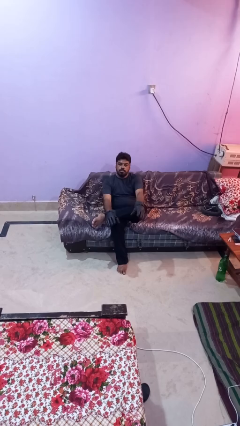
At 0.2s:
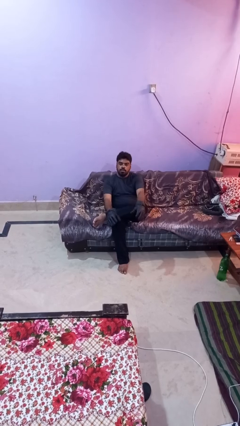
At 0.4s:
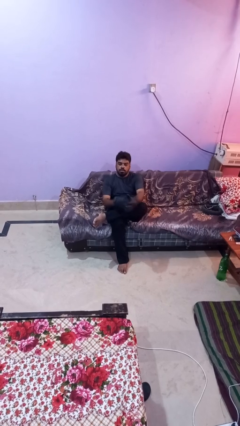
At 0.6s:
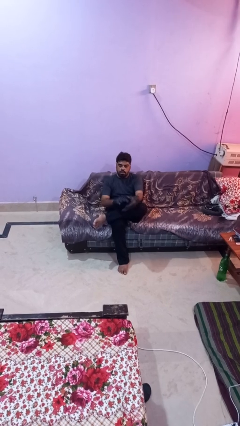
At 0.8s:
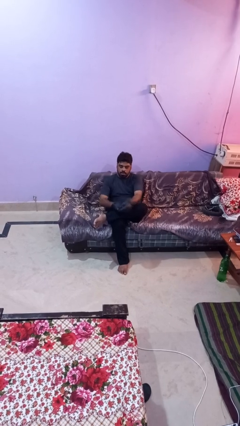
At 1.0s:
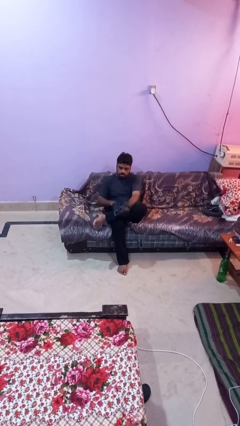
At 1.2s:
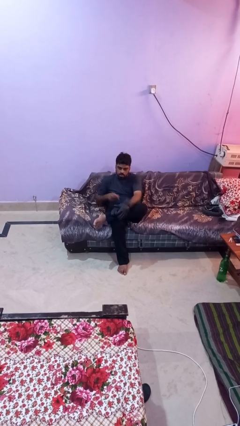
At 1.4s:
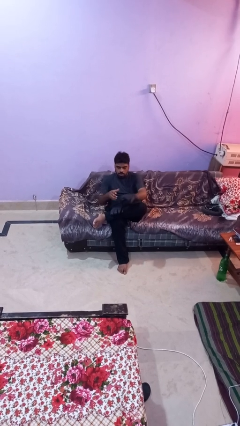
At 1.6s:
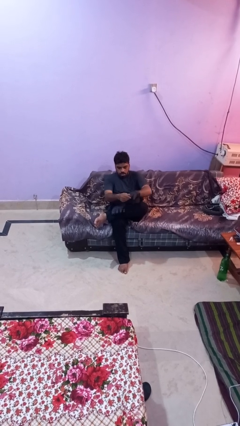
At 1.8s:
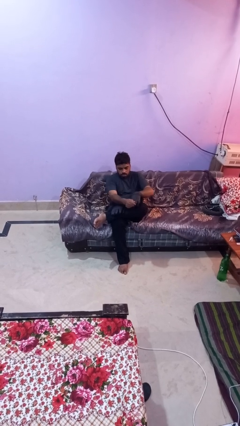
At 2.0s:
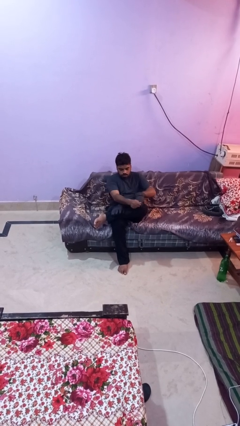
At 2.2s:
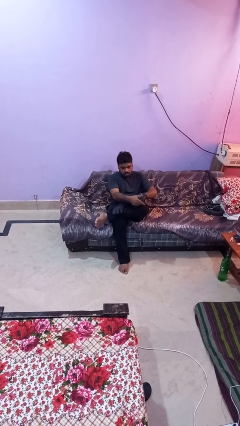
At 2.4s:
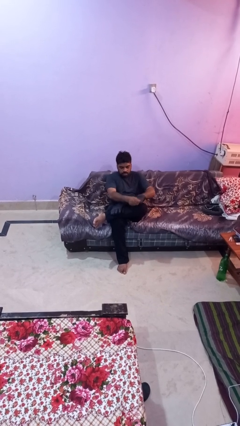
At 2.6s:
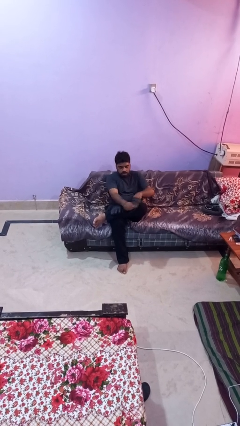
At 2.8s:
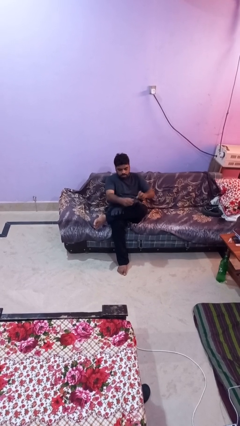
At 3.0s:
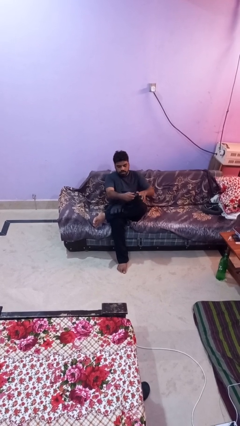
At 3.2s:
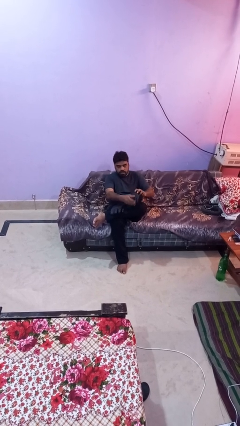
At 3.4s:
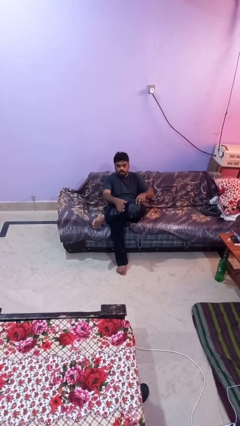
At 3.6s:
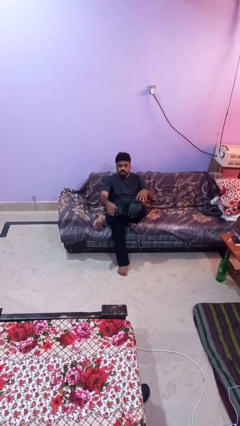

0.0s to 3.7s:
person takes off gloves

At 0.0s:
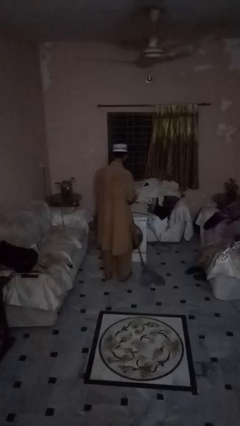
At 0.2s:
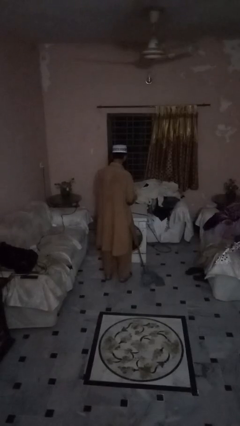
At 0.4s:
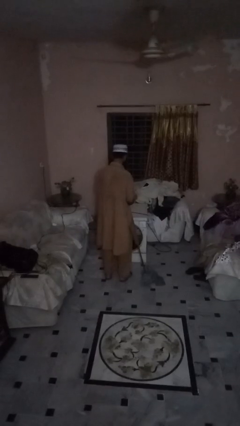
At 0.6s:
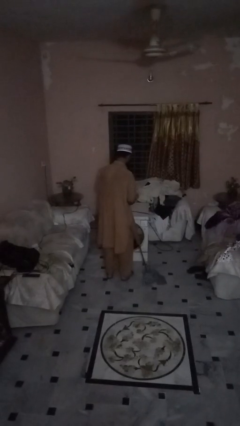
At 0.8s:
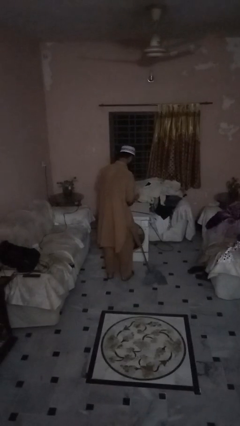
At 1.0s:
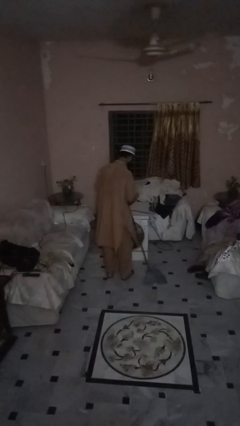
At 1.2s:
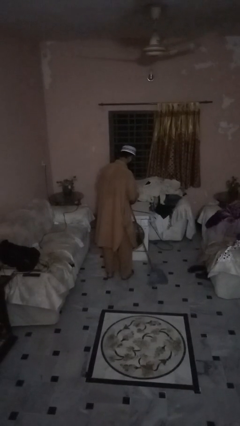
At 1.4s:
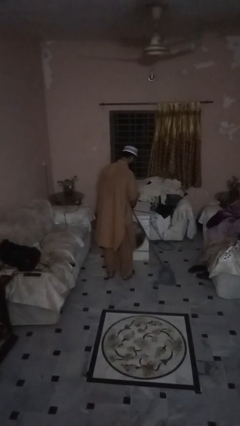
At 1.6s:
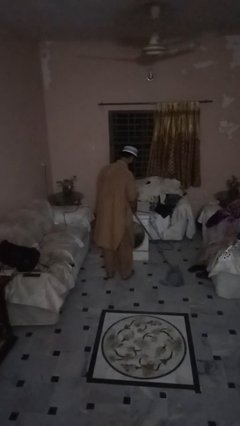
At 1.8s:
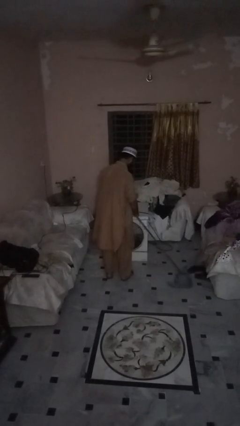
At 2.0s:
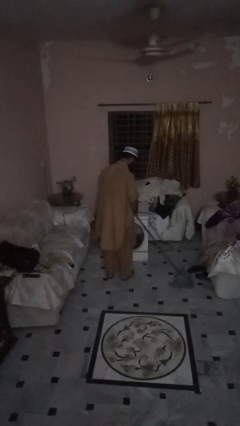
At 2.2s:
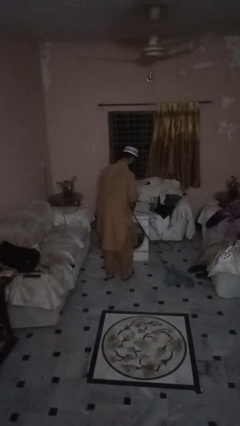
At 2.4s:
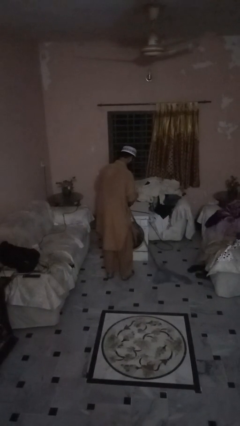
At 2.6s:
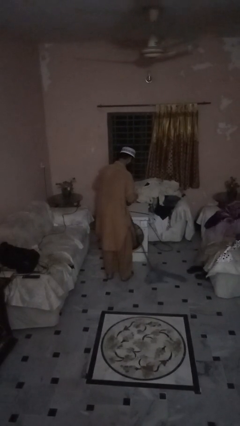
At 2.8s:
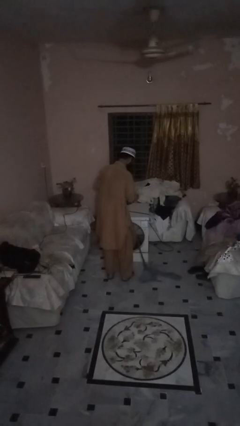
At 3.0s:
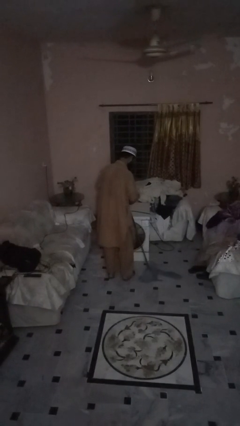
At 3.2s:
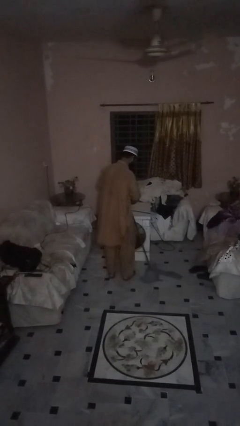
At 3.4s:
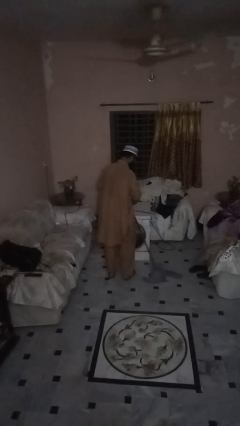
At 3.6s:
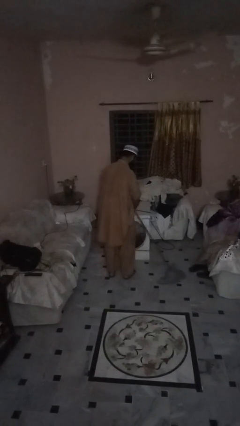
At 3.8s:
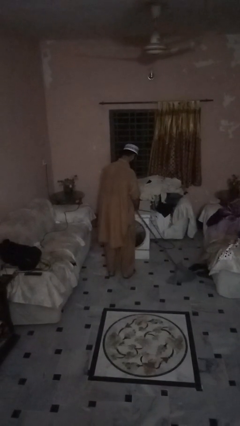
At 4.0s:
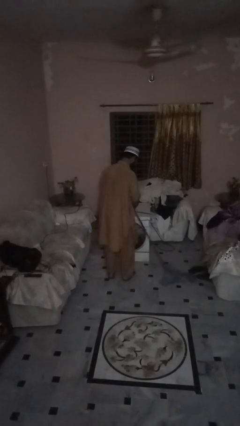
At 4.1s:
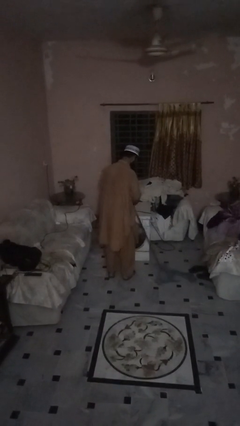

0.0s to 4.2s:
person mops

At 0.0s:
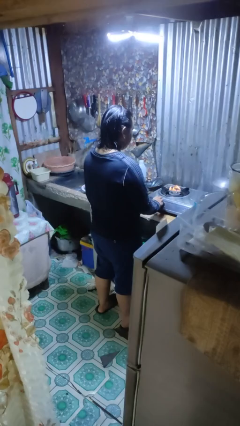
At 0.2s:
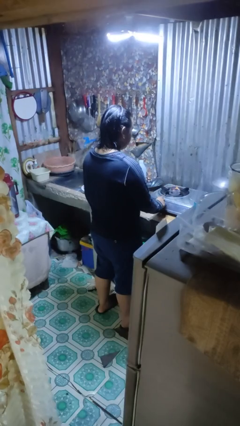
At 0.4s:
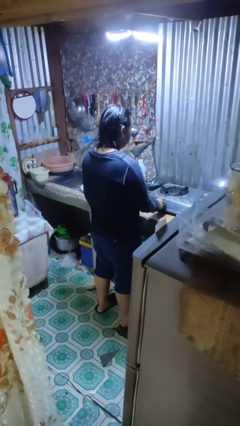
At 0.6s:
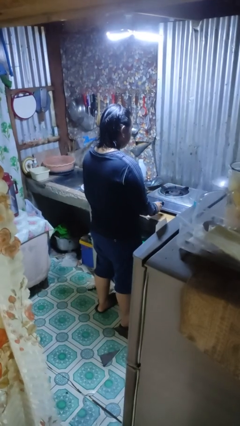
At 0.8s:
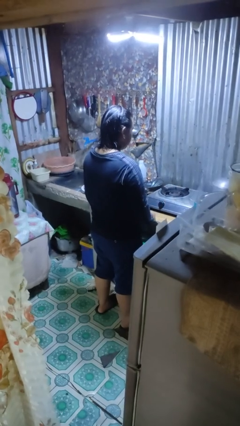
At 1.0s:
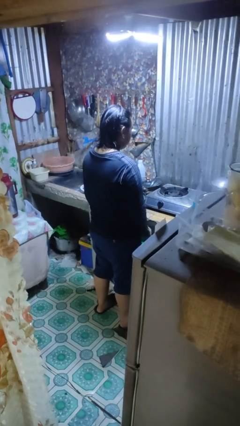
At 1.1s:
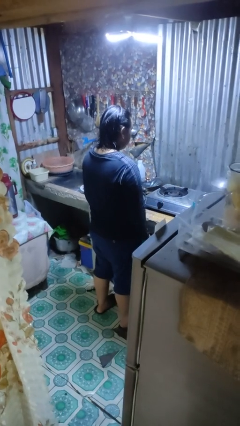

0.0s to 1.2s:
person turns off stovetop

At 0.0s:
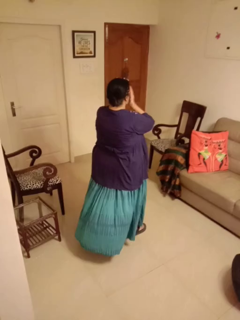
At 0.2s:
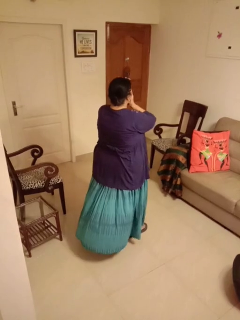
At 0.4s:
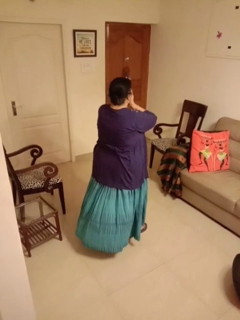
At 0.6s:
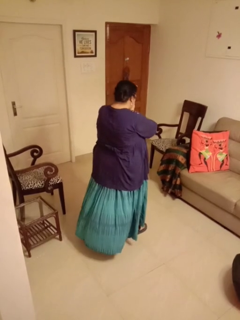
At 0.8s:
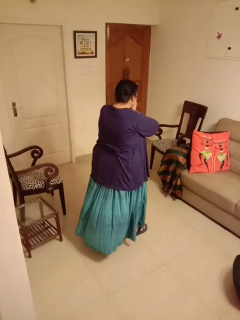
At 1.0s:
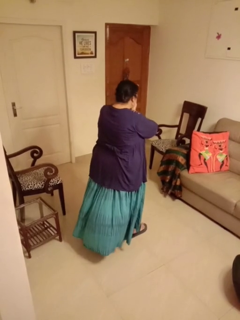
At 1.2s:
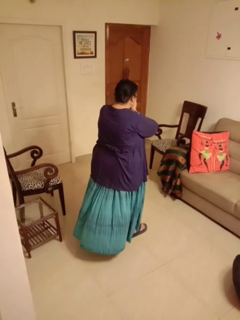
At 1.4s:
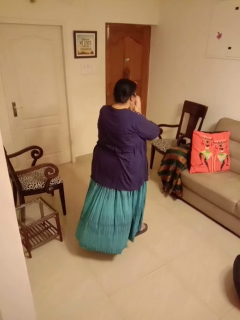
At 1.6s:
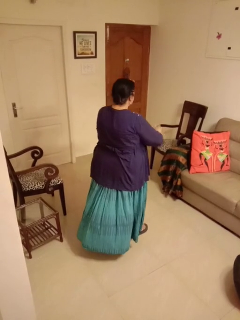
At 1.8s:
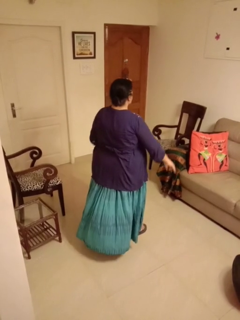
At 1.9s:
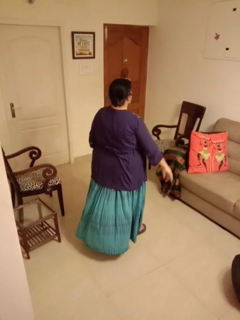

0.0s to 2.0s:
person sneezes into hand

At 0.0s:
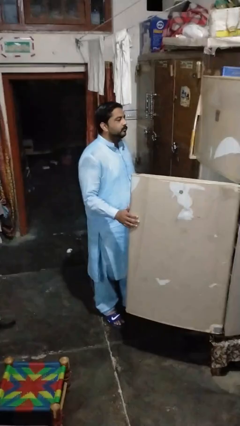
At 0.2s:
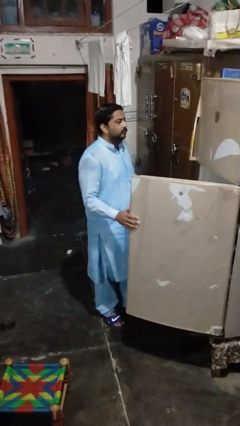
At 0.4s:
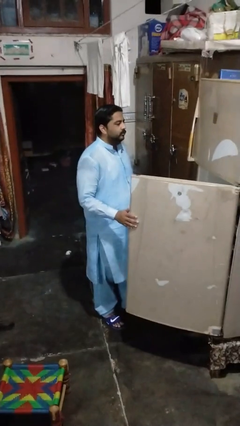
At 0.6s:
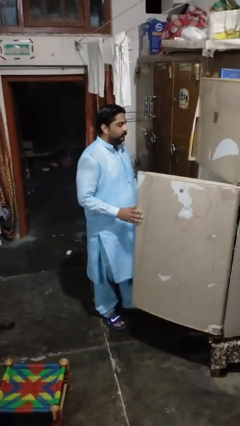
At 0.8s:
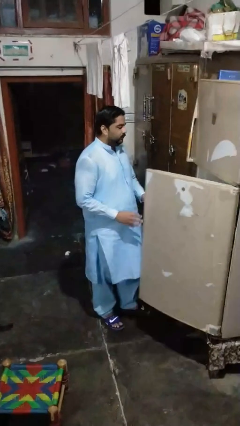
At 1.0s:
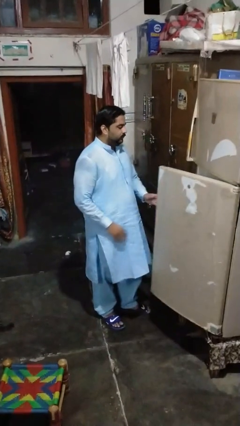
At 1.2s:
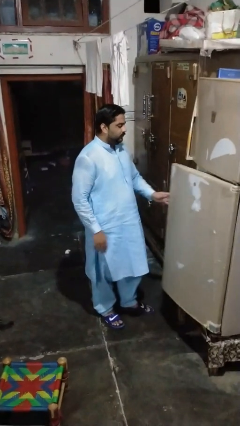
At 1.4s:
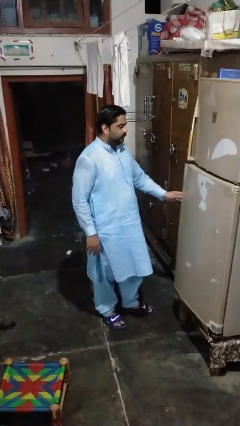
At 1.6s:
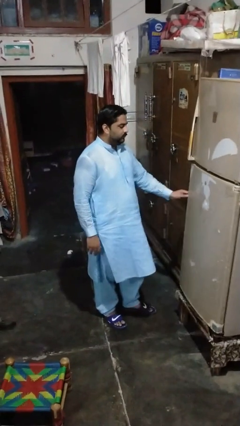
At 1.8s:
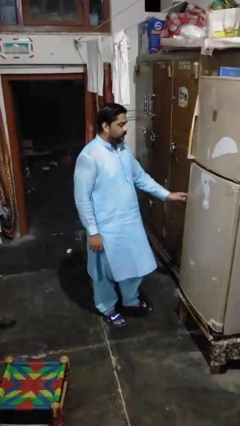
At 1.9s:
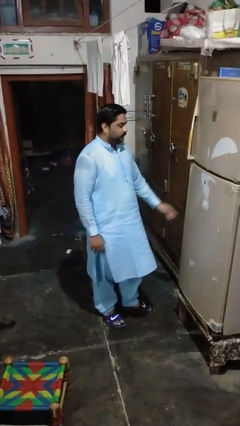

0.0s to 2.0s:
person closes refrigerator

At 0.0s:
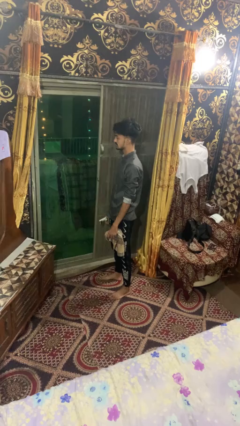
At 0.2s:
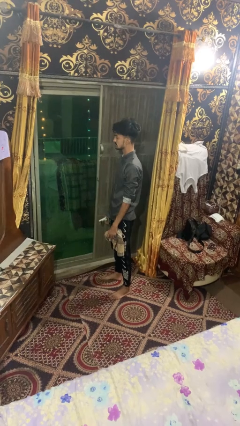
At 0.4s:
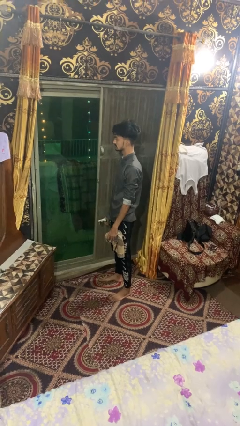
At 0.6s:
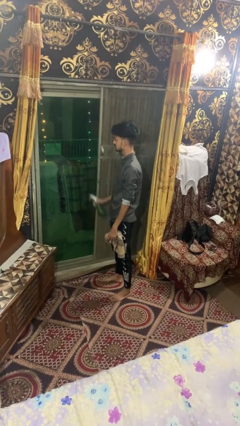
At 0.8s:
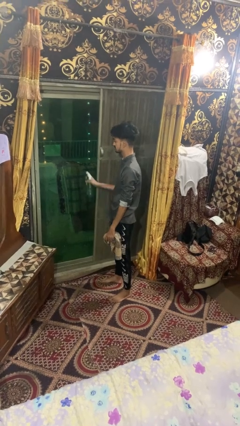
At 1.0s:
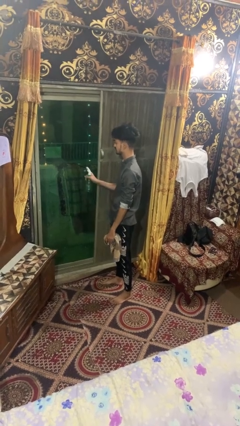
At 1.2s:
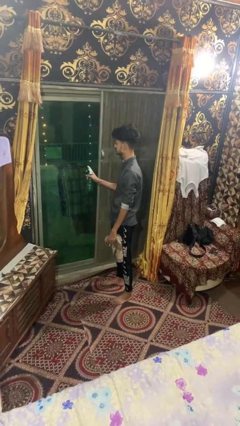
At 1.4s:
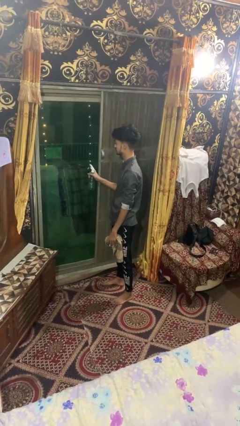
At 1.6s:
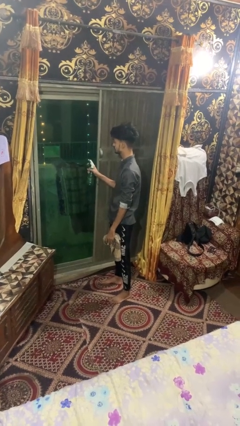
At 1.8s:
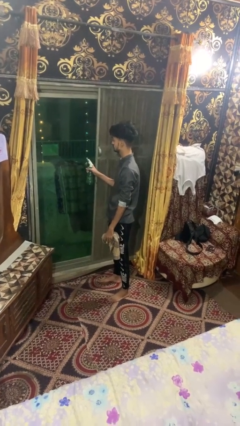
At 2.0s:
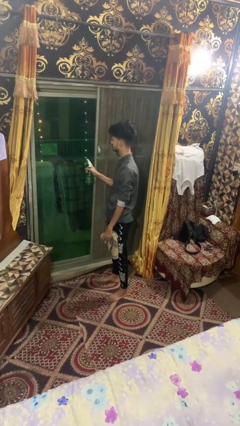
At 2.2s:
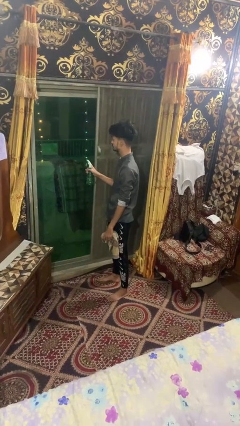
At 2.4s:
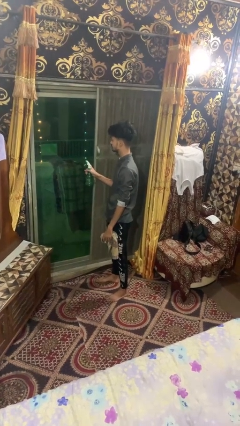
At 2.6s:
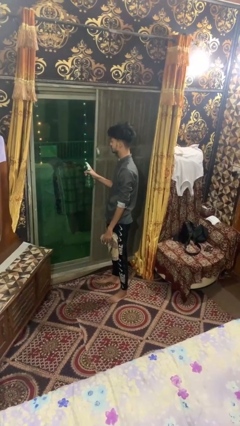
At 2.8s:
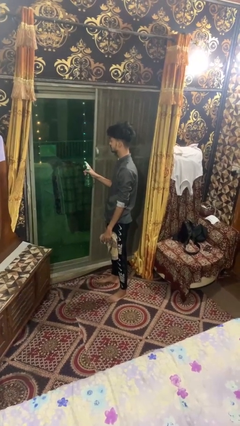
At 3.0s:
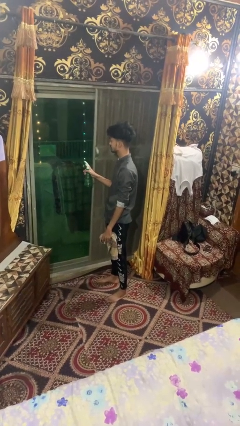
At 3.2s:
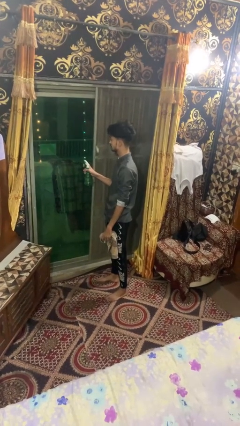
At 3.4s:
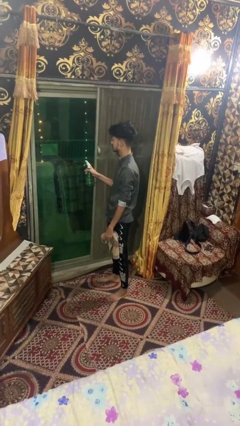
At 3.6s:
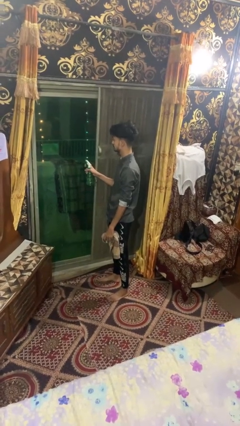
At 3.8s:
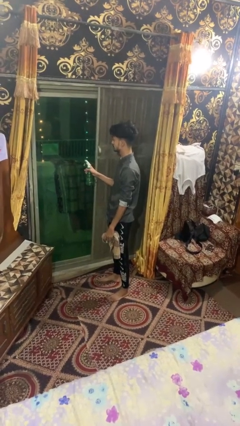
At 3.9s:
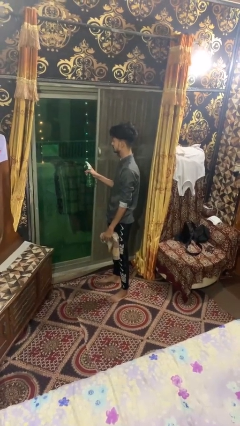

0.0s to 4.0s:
person sprays from bottle

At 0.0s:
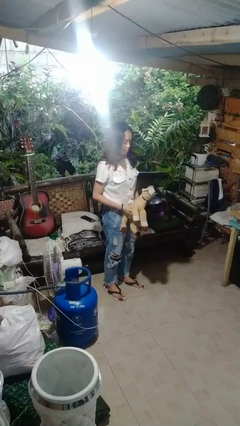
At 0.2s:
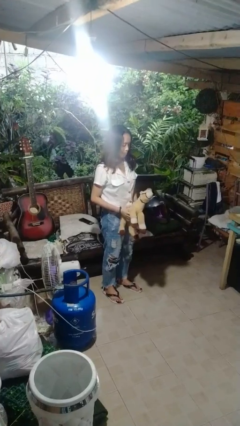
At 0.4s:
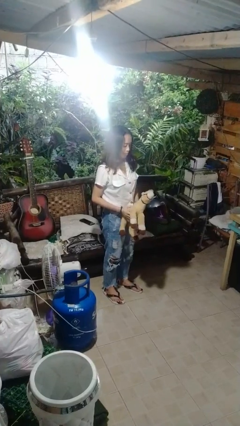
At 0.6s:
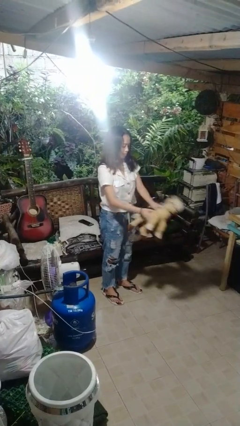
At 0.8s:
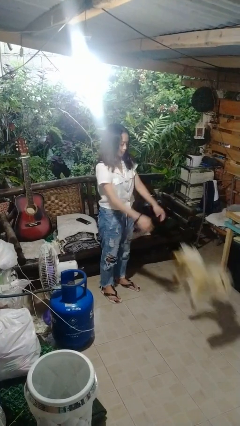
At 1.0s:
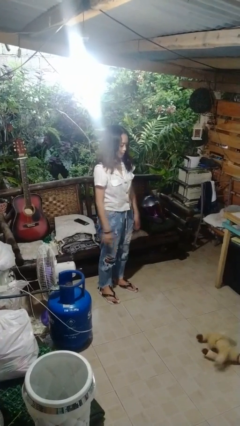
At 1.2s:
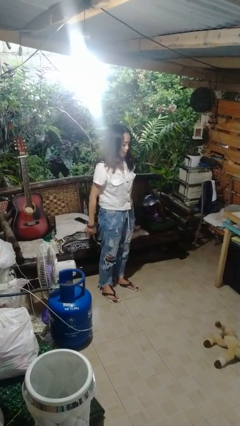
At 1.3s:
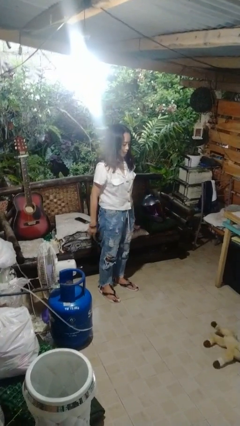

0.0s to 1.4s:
person throws object to ground
